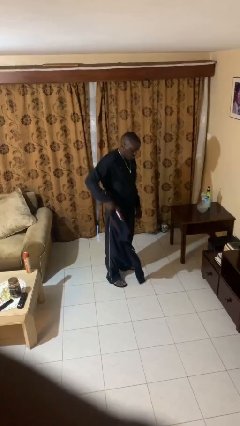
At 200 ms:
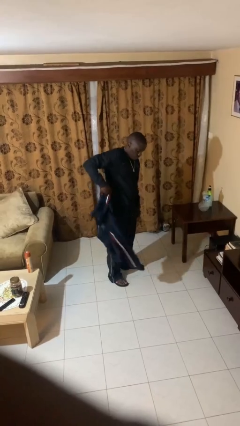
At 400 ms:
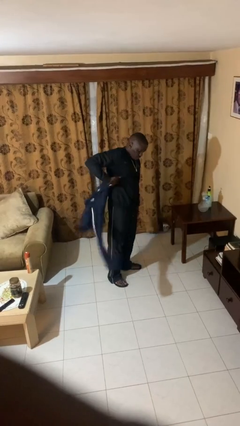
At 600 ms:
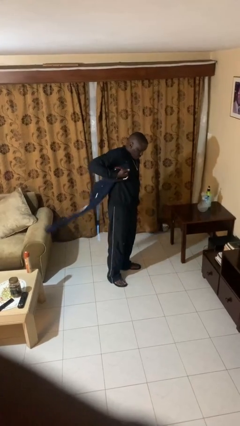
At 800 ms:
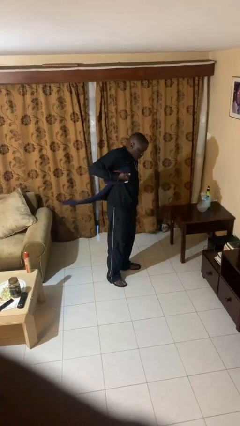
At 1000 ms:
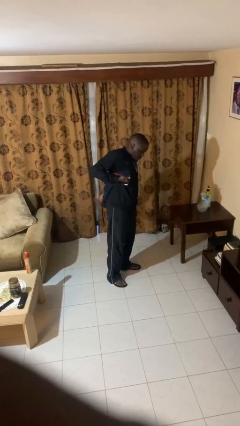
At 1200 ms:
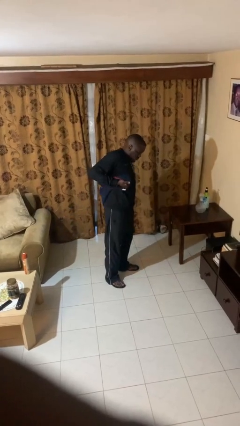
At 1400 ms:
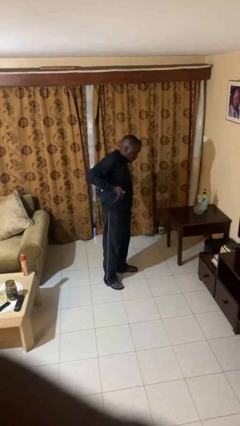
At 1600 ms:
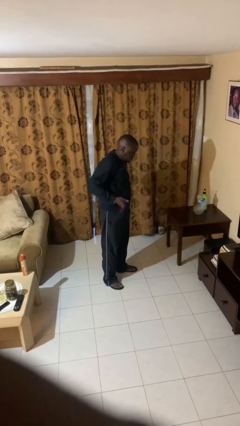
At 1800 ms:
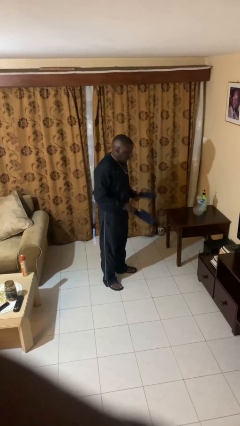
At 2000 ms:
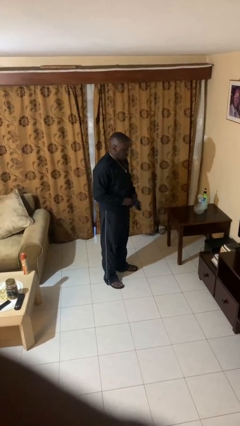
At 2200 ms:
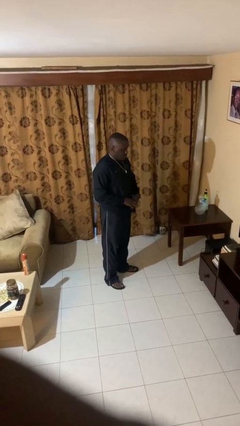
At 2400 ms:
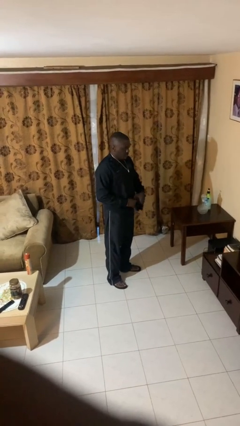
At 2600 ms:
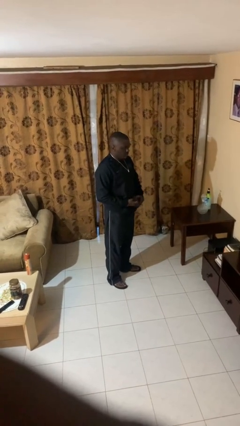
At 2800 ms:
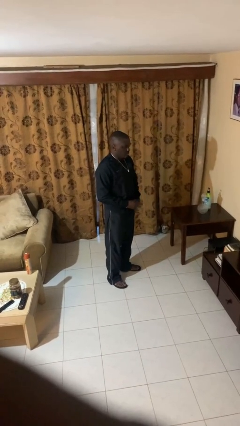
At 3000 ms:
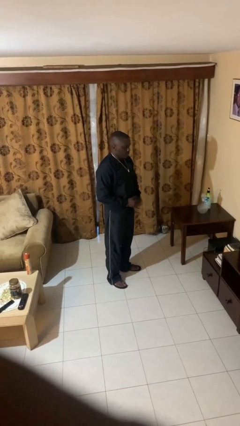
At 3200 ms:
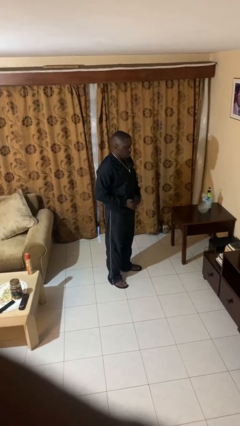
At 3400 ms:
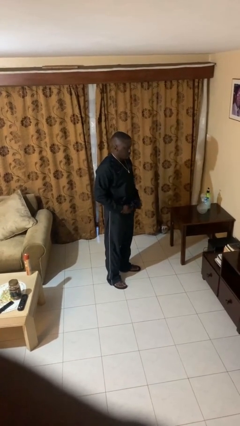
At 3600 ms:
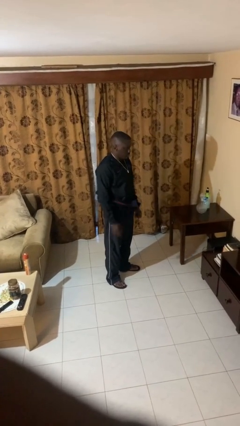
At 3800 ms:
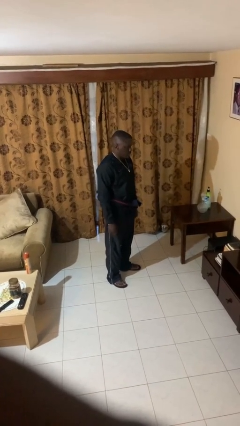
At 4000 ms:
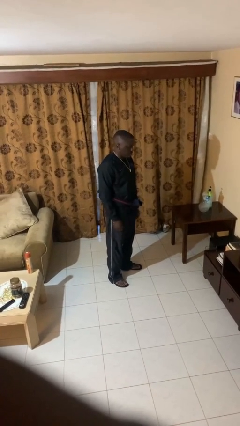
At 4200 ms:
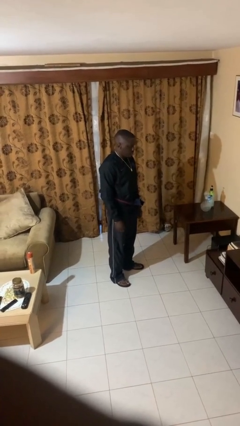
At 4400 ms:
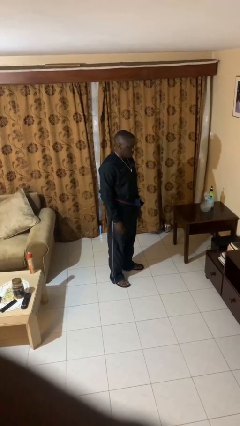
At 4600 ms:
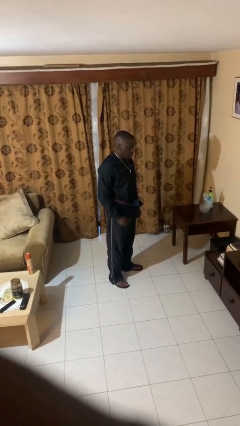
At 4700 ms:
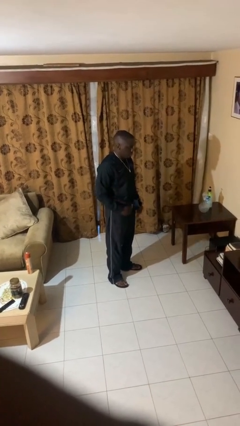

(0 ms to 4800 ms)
person ties jacket around waist

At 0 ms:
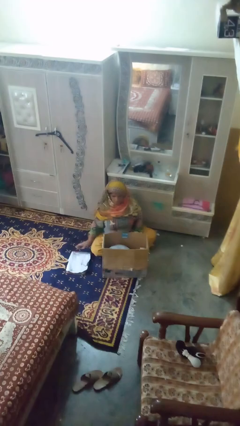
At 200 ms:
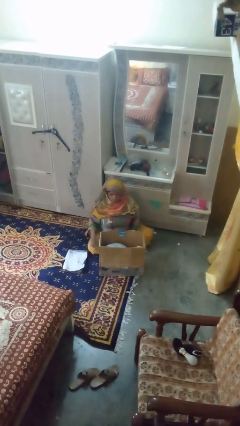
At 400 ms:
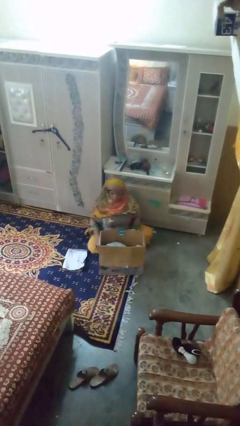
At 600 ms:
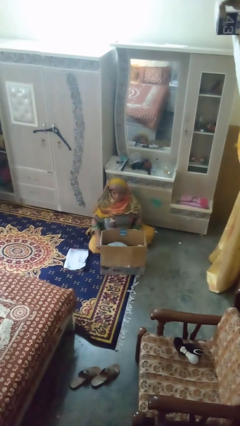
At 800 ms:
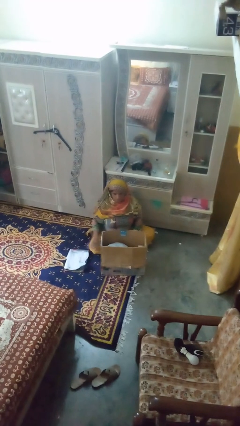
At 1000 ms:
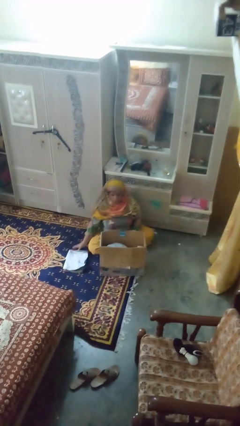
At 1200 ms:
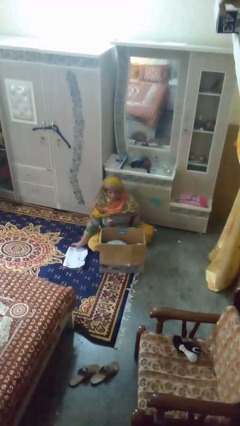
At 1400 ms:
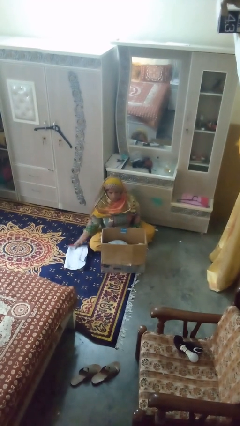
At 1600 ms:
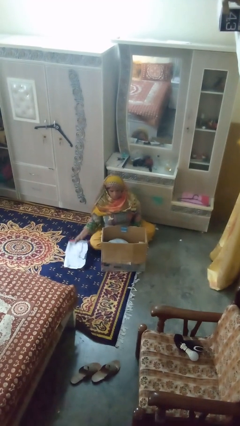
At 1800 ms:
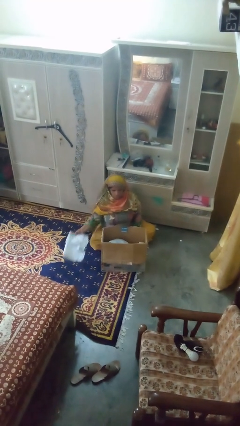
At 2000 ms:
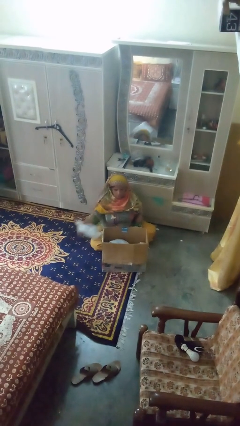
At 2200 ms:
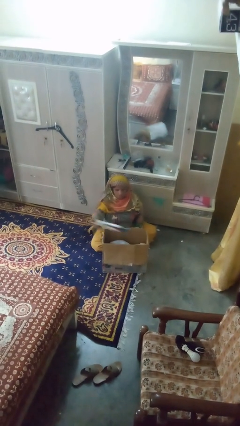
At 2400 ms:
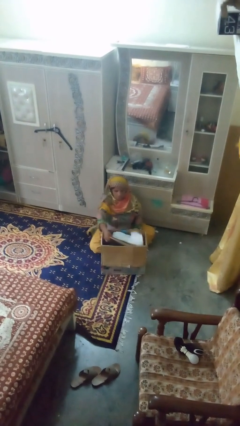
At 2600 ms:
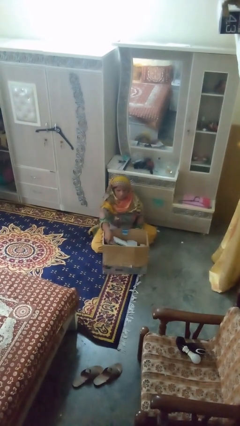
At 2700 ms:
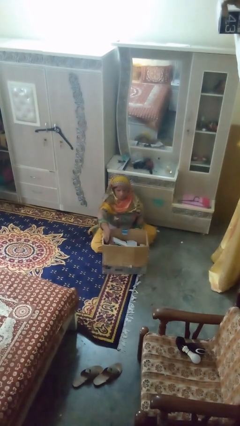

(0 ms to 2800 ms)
person puts object into box

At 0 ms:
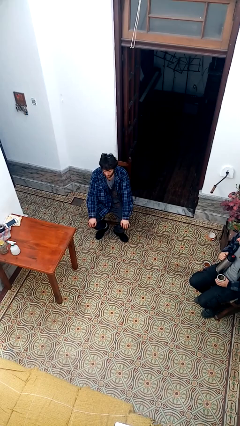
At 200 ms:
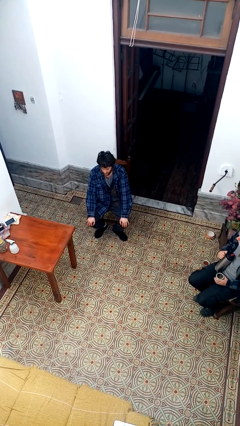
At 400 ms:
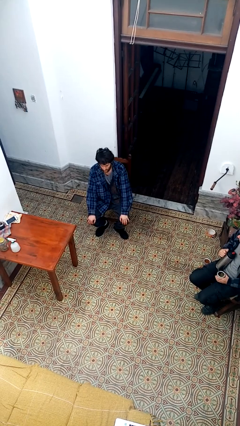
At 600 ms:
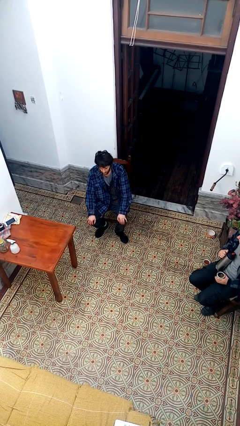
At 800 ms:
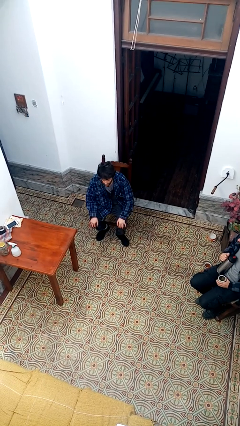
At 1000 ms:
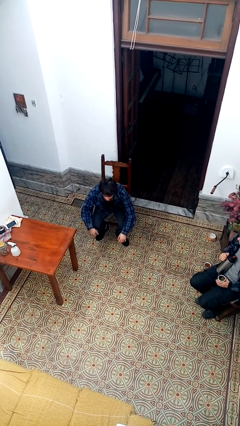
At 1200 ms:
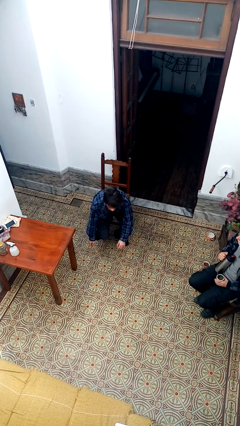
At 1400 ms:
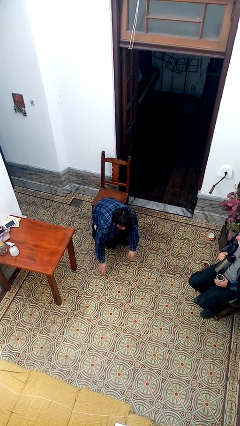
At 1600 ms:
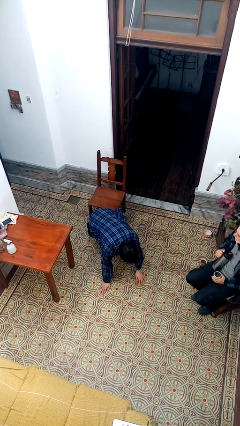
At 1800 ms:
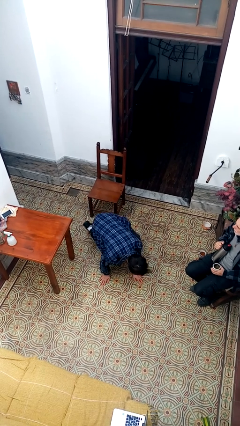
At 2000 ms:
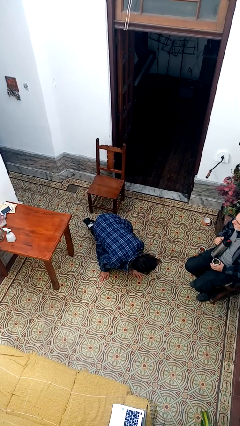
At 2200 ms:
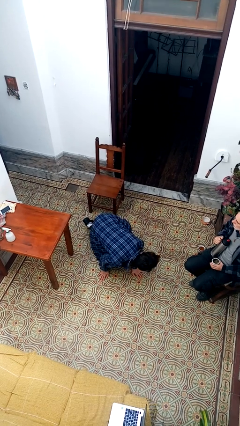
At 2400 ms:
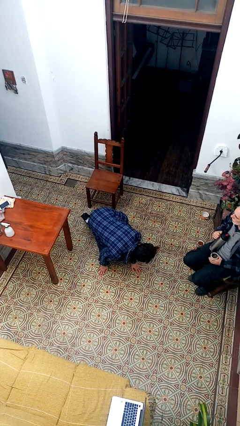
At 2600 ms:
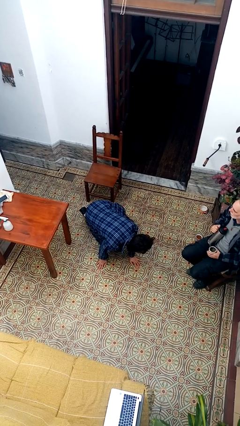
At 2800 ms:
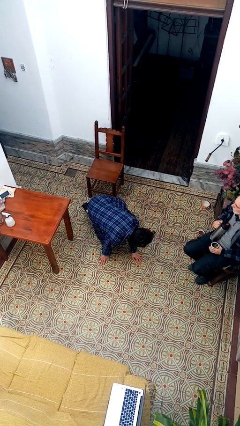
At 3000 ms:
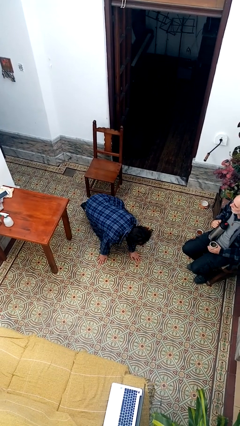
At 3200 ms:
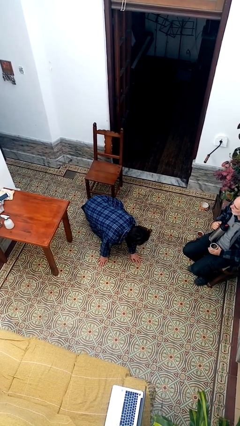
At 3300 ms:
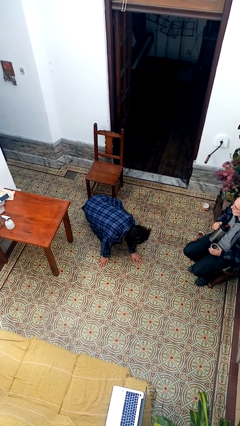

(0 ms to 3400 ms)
person falls from chair

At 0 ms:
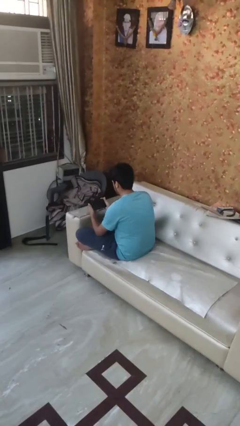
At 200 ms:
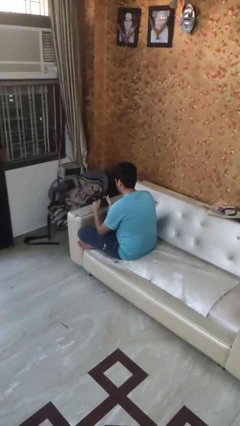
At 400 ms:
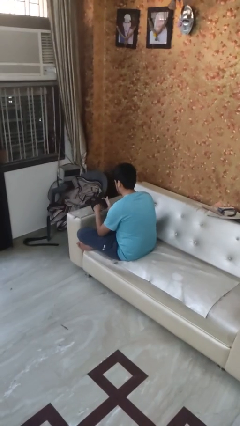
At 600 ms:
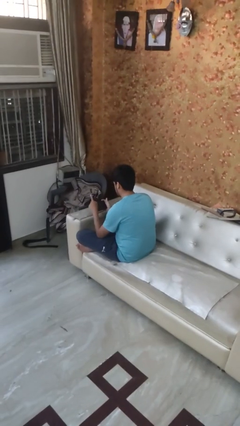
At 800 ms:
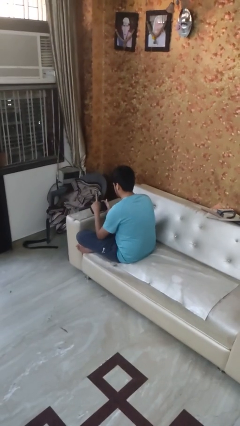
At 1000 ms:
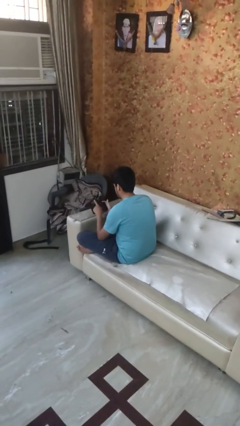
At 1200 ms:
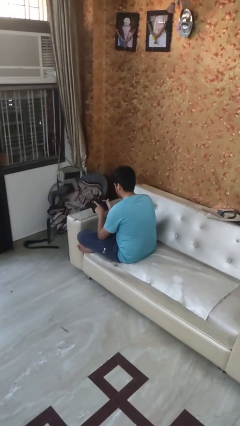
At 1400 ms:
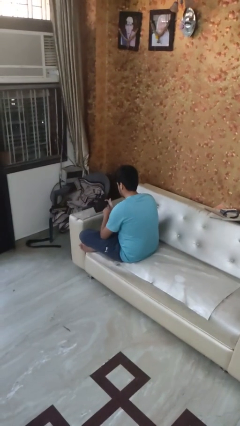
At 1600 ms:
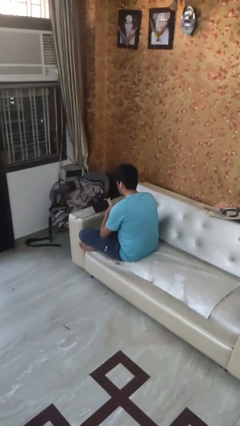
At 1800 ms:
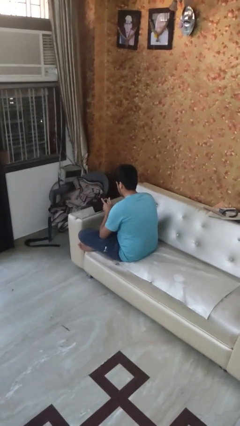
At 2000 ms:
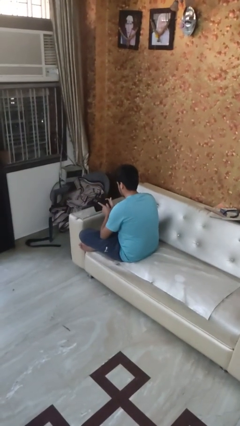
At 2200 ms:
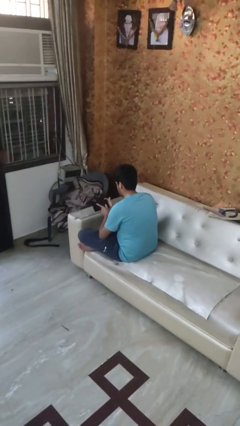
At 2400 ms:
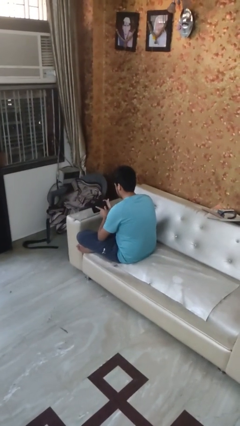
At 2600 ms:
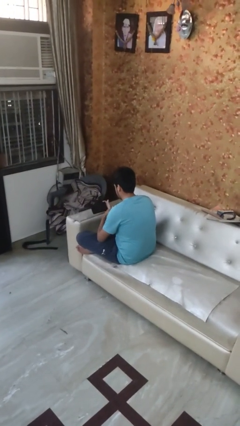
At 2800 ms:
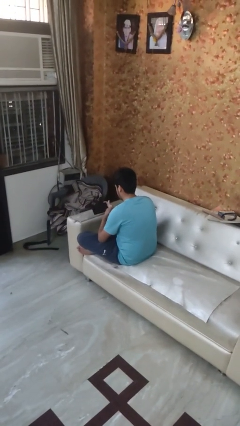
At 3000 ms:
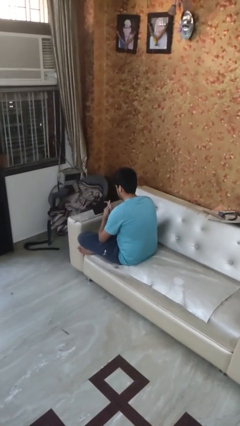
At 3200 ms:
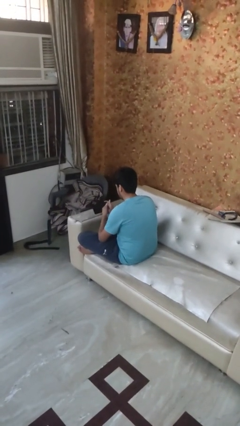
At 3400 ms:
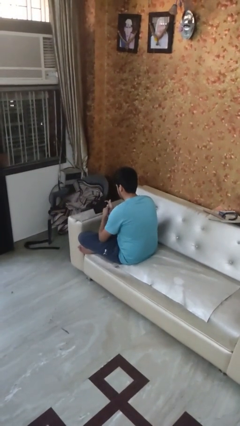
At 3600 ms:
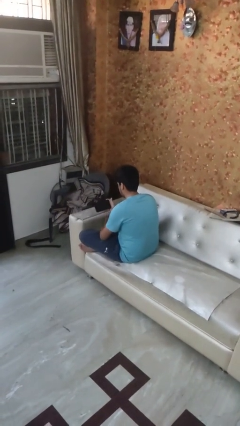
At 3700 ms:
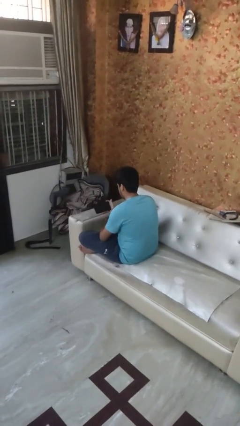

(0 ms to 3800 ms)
person interacts with tablet

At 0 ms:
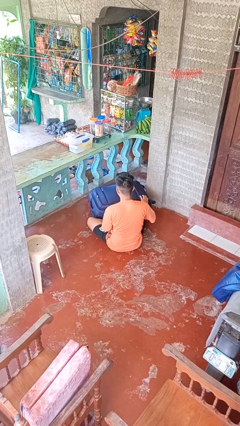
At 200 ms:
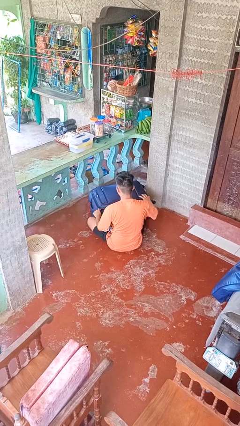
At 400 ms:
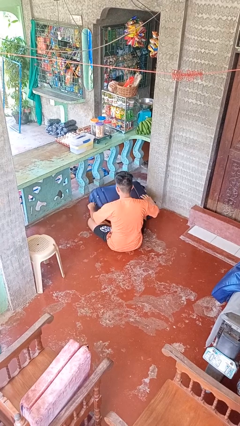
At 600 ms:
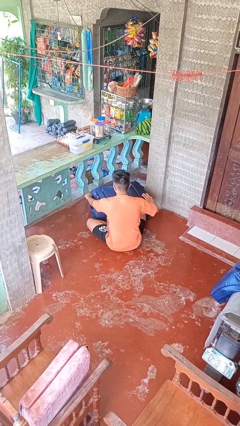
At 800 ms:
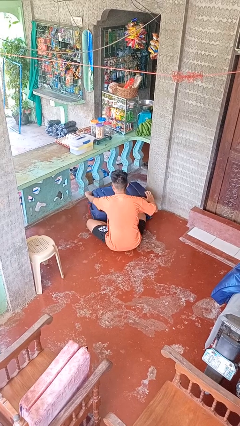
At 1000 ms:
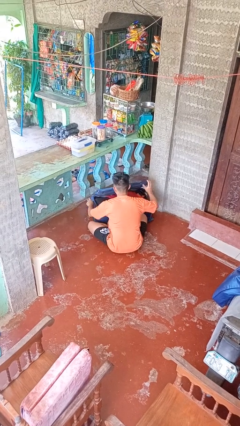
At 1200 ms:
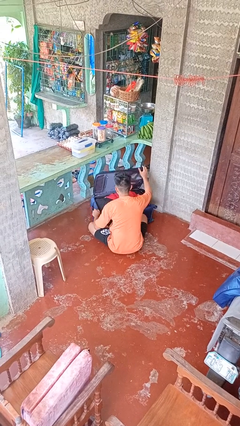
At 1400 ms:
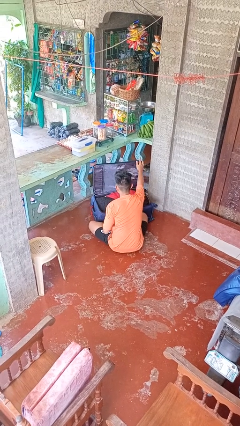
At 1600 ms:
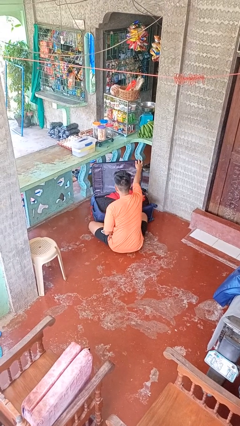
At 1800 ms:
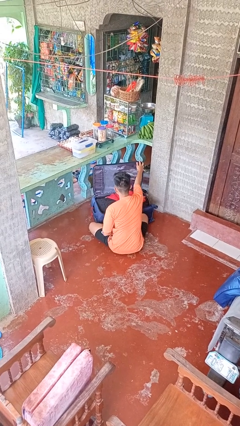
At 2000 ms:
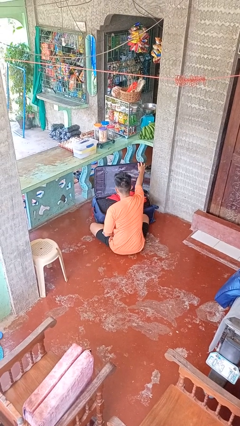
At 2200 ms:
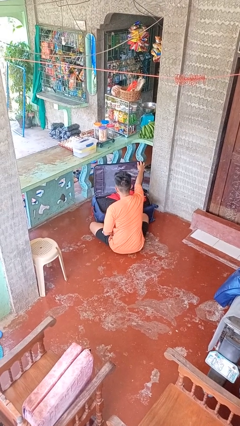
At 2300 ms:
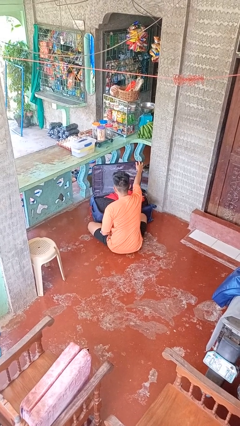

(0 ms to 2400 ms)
person opens suitcase
